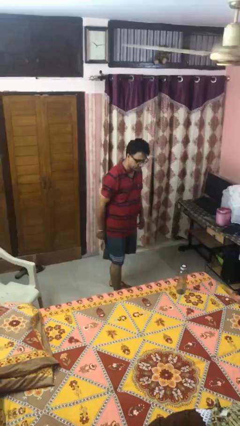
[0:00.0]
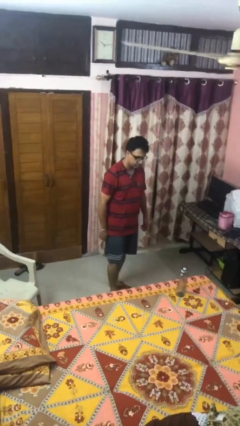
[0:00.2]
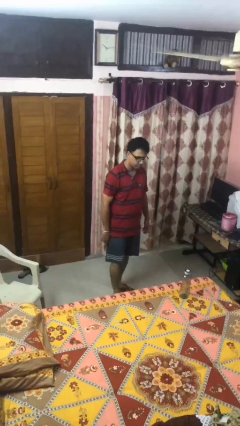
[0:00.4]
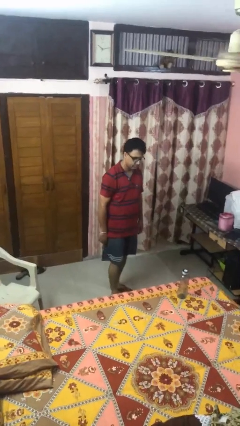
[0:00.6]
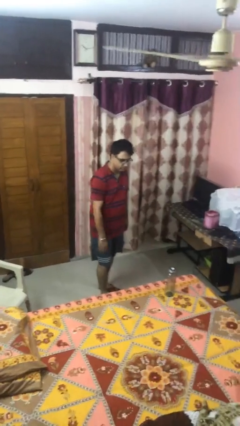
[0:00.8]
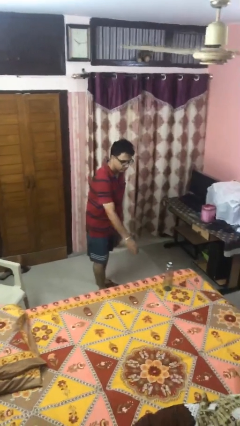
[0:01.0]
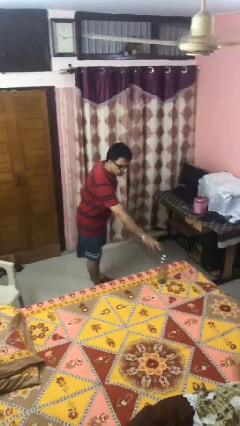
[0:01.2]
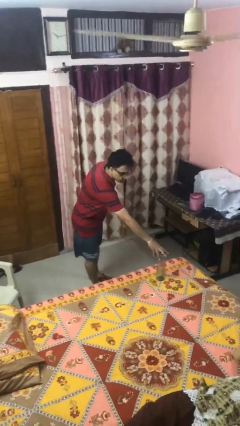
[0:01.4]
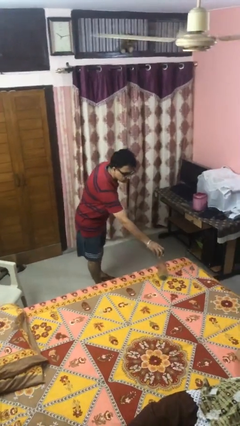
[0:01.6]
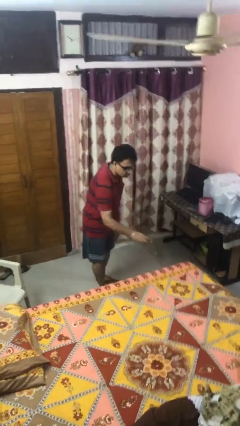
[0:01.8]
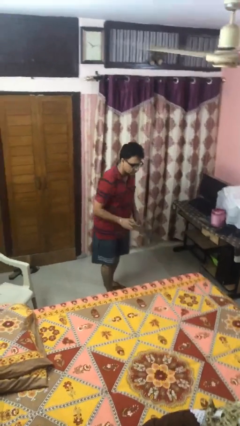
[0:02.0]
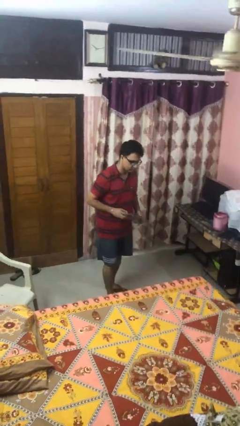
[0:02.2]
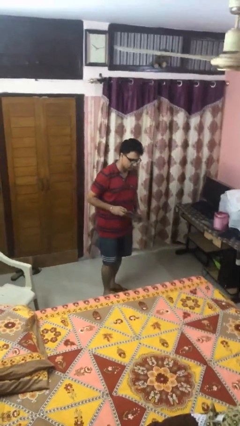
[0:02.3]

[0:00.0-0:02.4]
person picks up object from bed

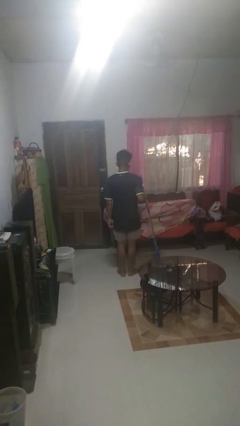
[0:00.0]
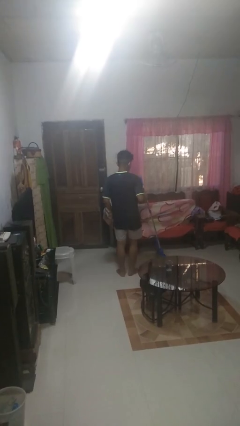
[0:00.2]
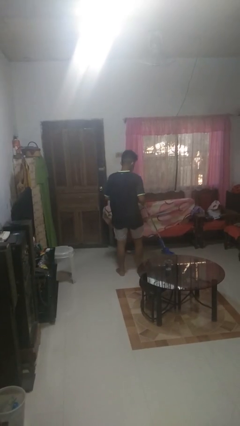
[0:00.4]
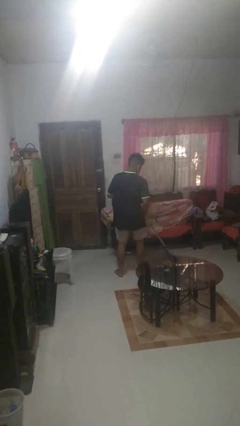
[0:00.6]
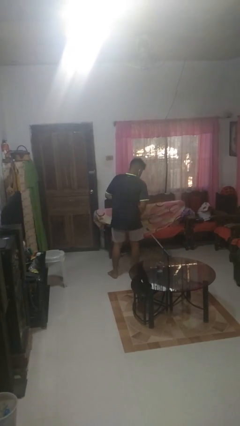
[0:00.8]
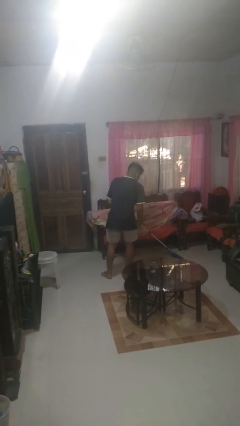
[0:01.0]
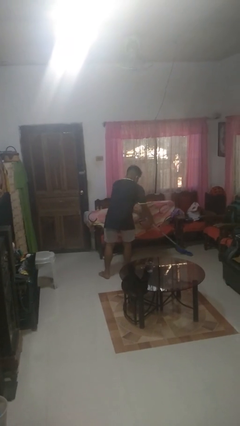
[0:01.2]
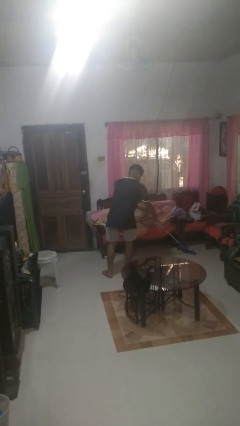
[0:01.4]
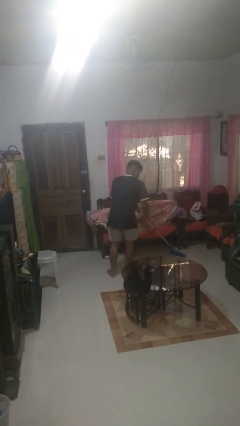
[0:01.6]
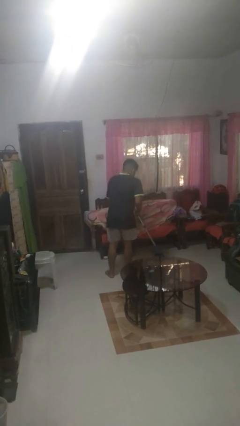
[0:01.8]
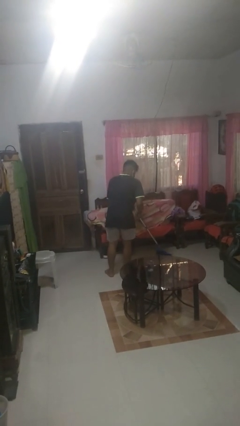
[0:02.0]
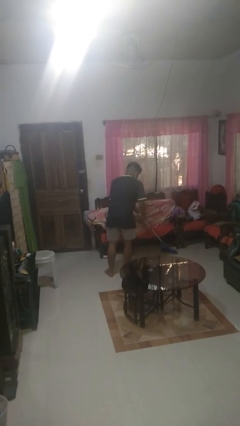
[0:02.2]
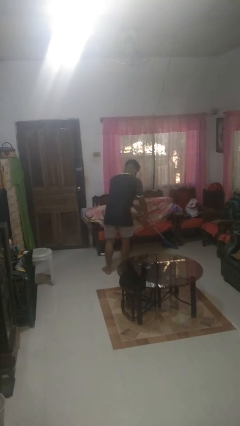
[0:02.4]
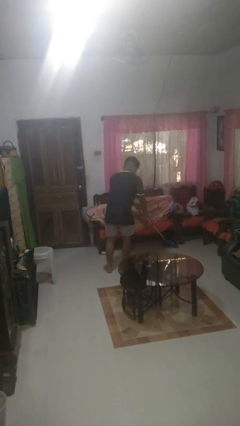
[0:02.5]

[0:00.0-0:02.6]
person mops

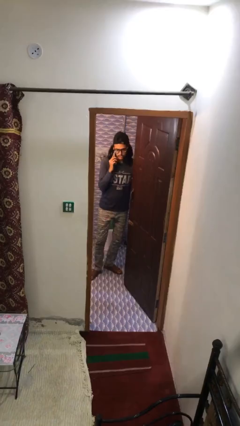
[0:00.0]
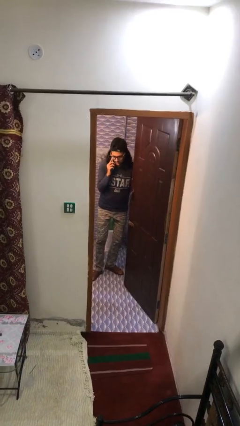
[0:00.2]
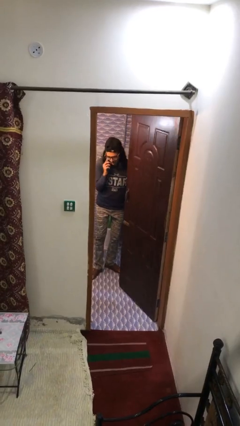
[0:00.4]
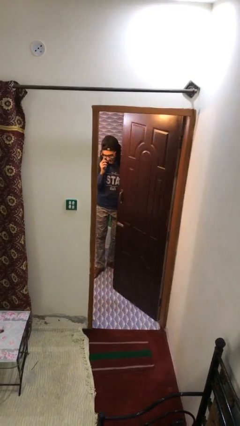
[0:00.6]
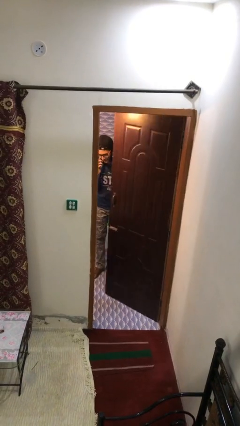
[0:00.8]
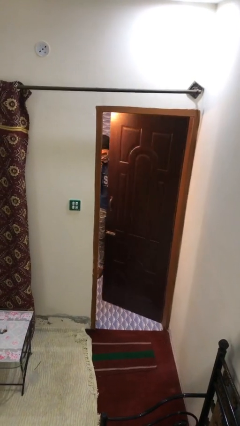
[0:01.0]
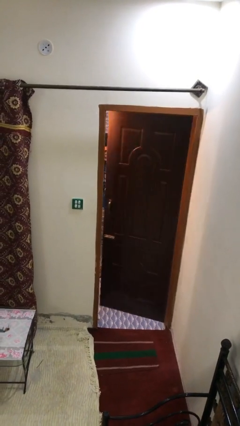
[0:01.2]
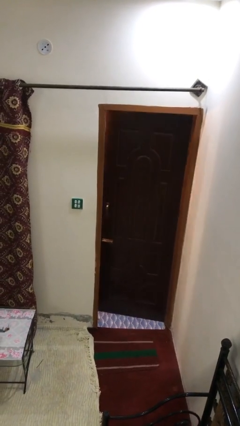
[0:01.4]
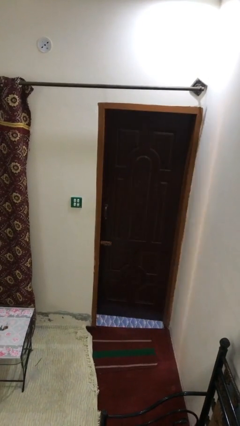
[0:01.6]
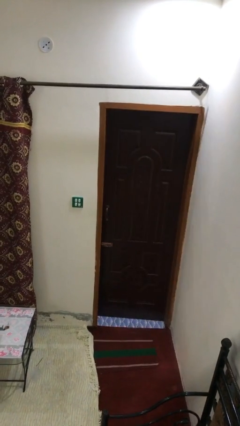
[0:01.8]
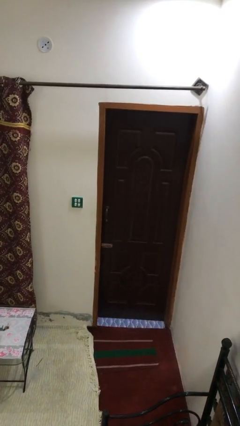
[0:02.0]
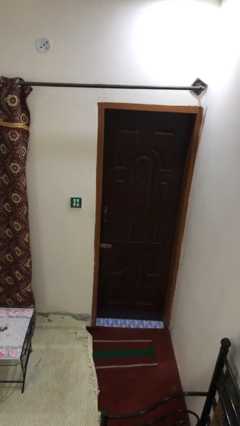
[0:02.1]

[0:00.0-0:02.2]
person closes facility door

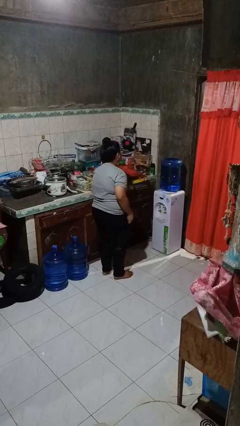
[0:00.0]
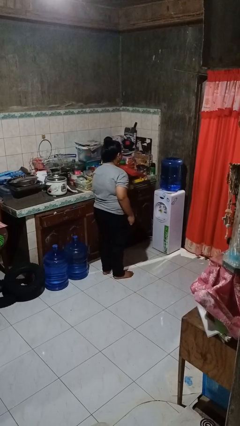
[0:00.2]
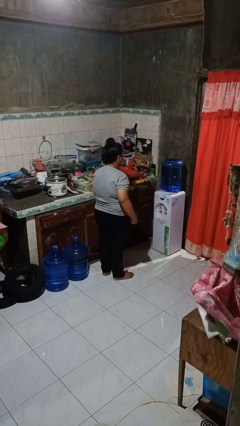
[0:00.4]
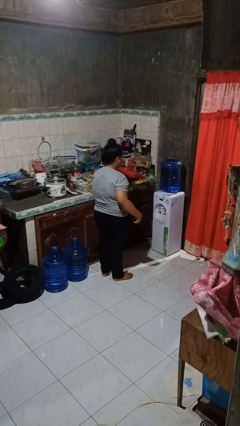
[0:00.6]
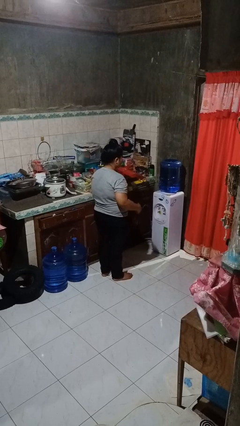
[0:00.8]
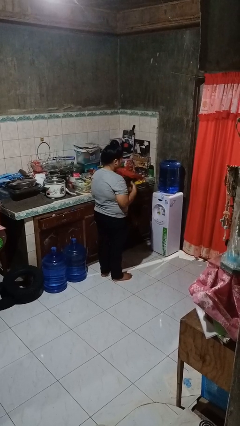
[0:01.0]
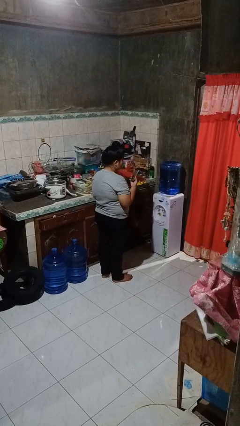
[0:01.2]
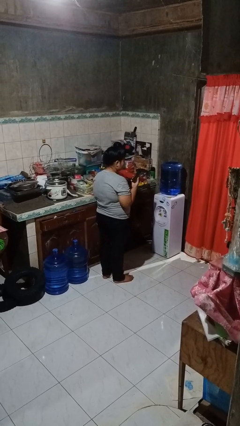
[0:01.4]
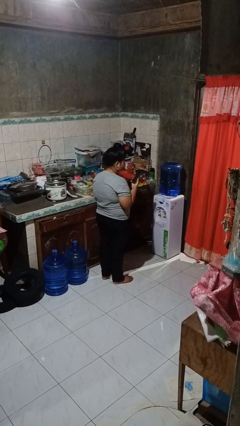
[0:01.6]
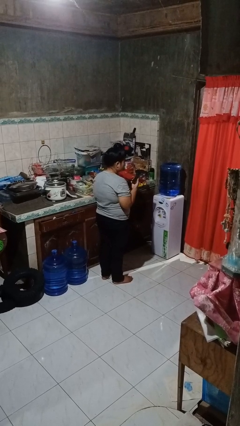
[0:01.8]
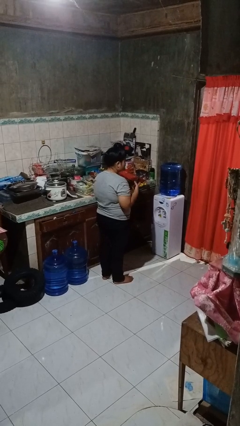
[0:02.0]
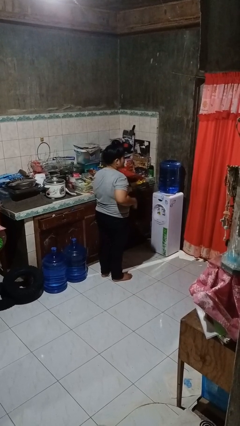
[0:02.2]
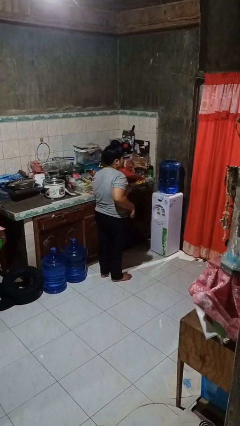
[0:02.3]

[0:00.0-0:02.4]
person takes phone from pocket

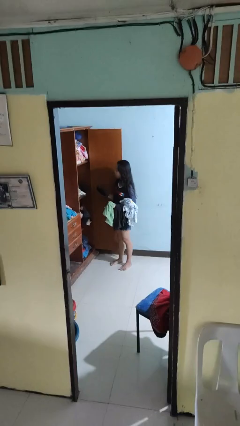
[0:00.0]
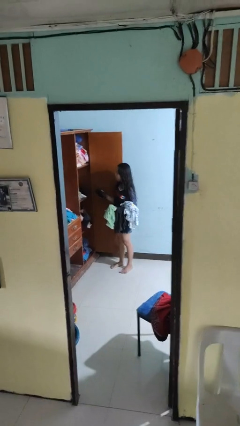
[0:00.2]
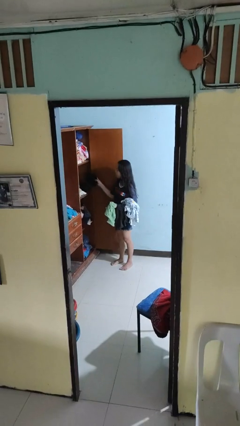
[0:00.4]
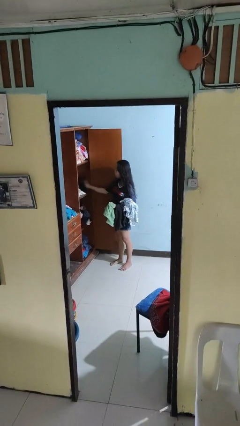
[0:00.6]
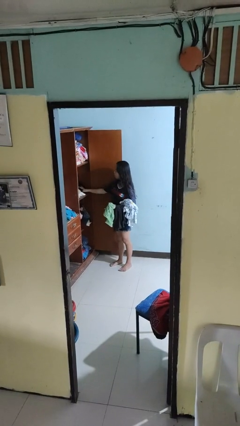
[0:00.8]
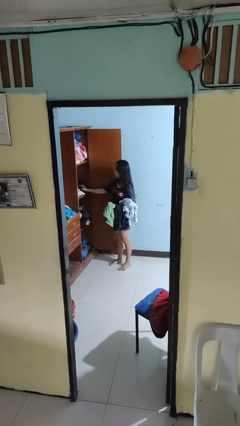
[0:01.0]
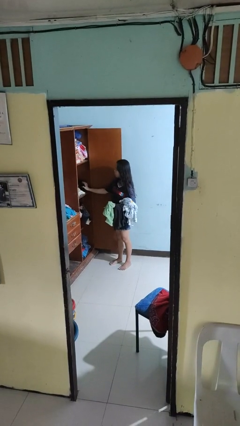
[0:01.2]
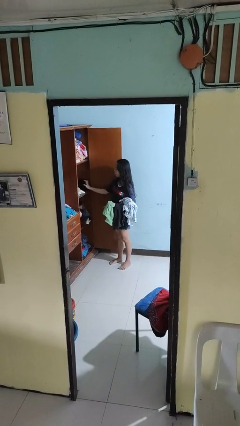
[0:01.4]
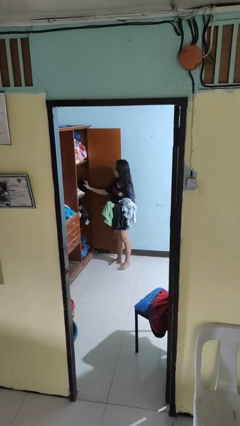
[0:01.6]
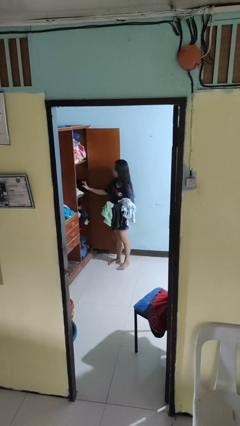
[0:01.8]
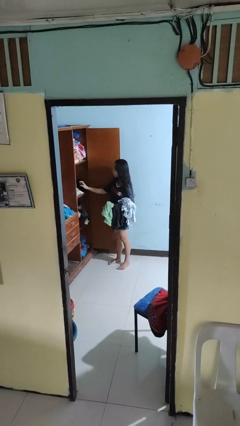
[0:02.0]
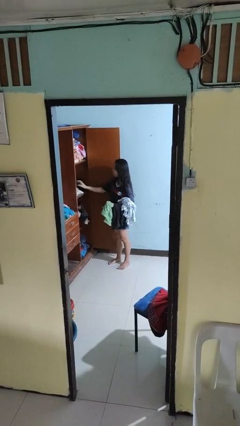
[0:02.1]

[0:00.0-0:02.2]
person puts clothes into dresser

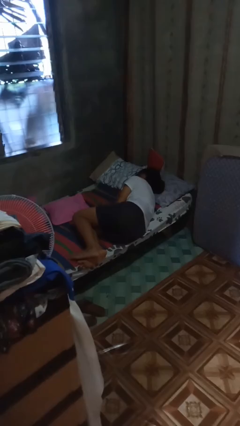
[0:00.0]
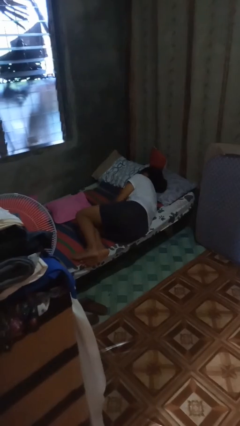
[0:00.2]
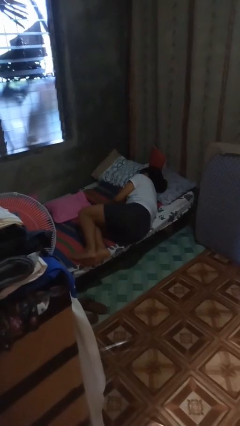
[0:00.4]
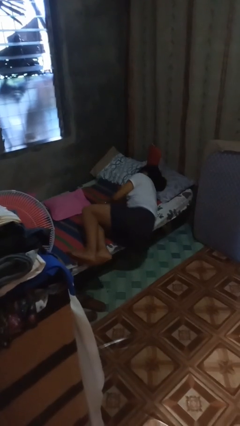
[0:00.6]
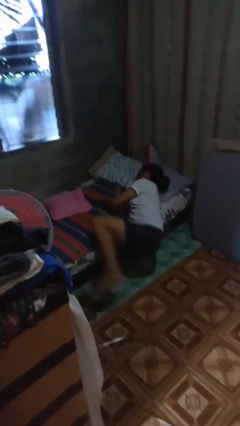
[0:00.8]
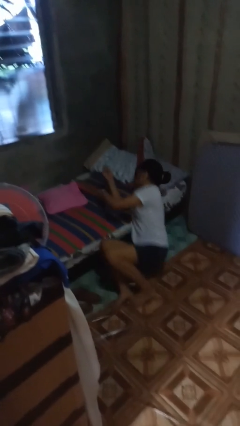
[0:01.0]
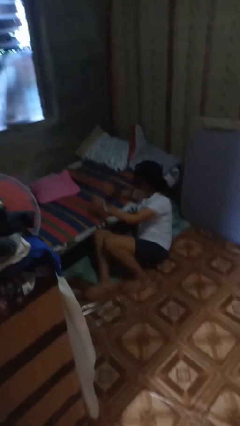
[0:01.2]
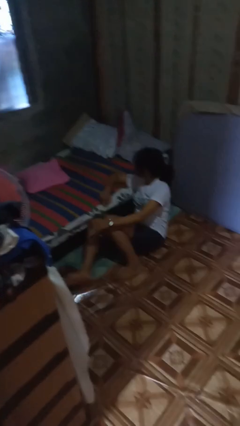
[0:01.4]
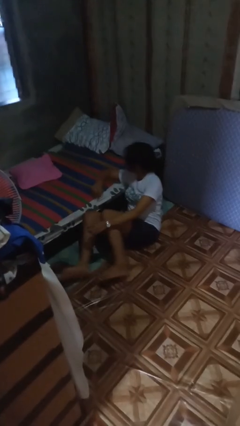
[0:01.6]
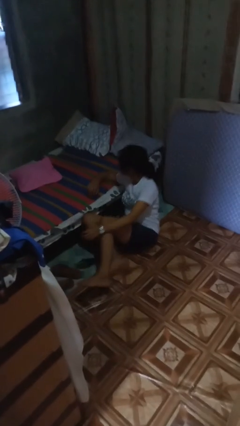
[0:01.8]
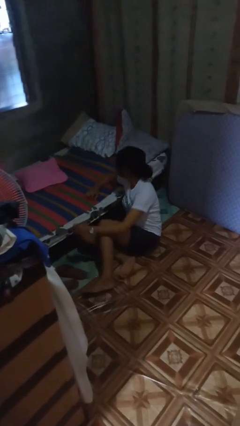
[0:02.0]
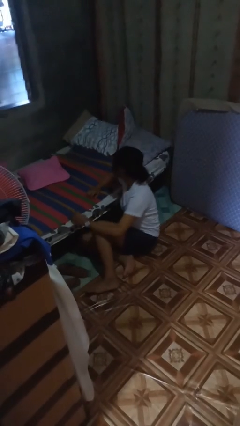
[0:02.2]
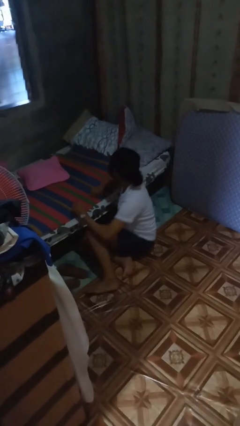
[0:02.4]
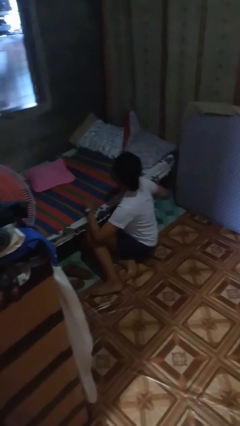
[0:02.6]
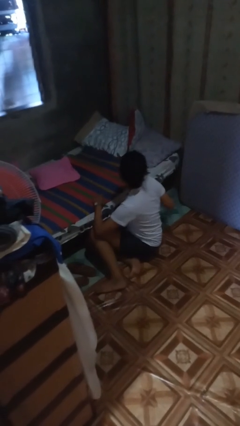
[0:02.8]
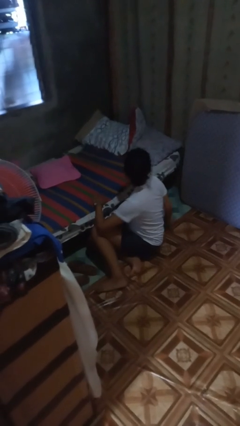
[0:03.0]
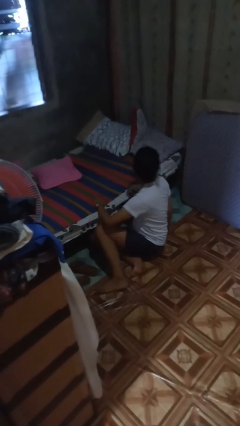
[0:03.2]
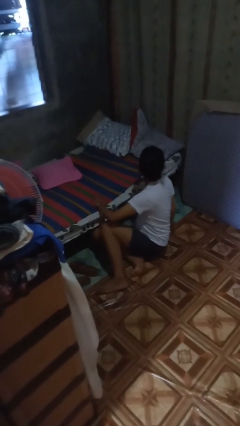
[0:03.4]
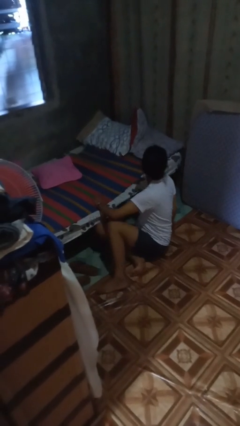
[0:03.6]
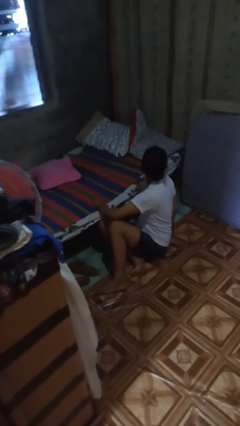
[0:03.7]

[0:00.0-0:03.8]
person falls from bed

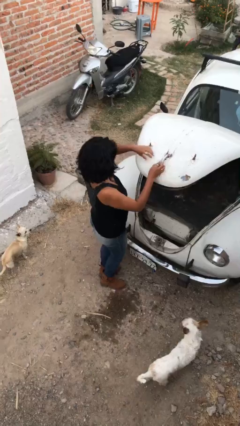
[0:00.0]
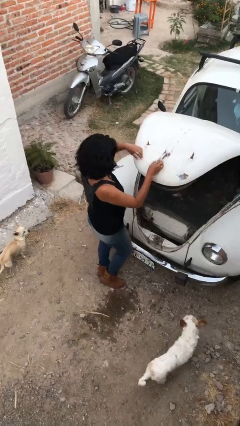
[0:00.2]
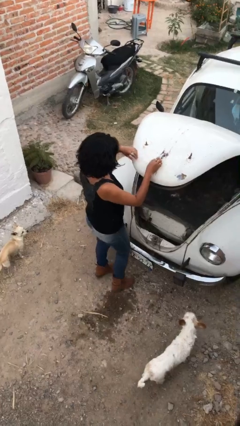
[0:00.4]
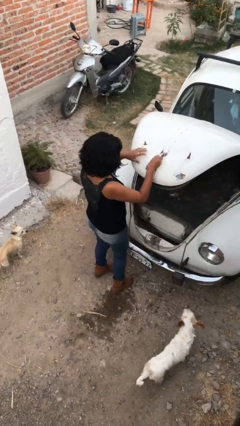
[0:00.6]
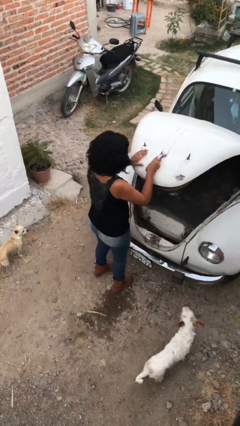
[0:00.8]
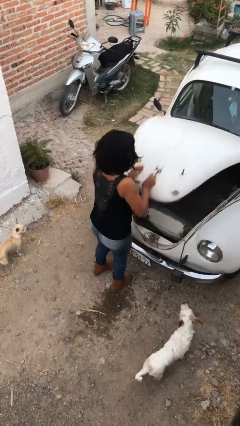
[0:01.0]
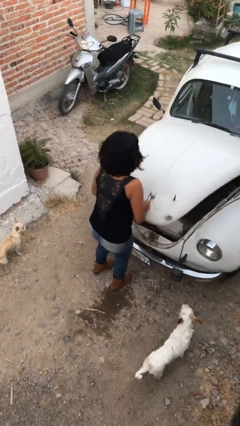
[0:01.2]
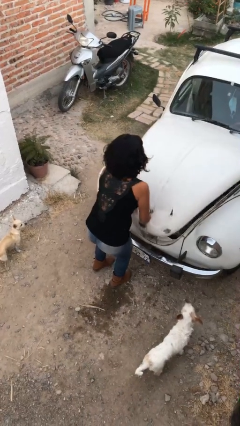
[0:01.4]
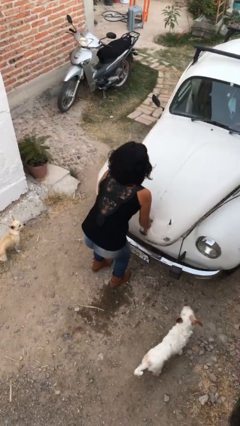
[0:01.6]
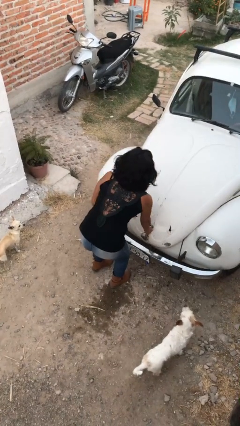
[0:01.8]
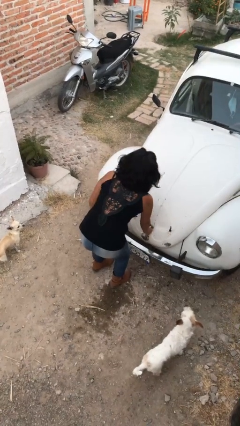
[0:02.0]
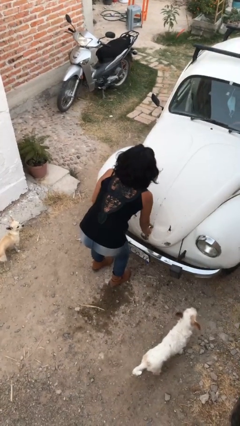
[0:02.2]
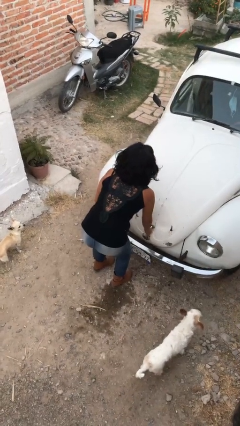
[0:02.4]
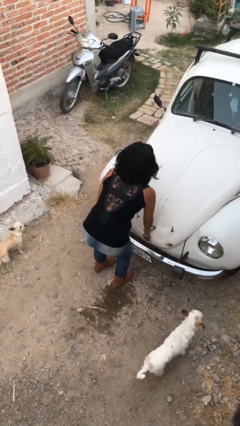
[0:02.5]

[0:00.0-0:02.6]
person closes car trunk
